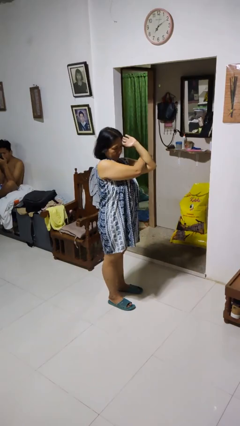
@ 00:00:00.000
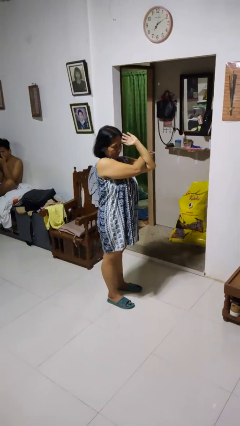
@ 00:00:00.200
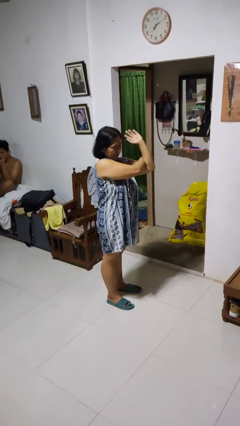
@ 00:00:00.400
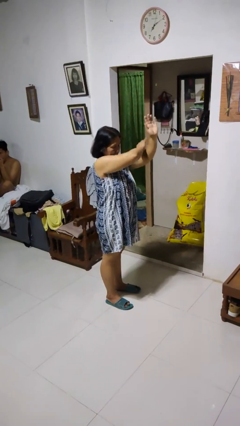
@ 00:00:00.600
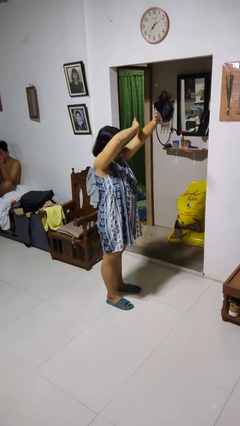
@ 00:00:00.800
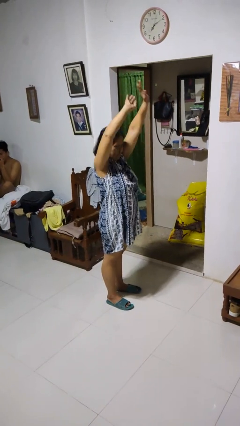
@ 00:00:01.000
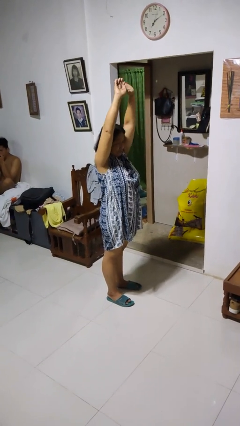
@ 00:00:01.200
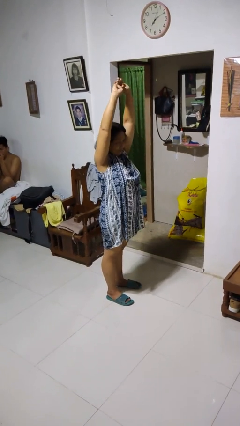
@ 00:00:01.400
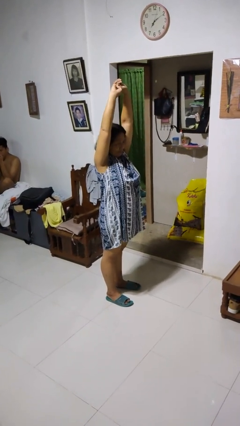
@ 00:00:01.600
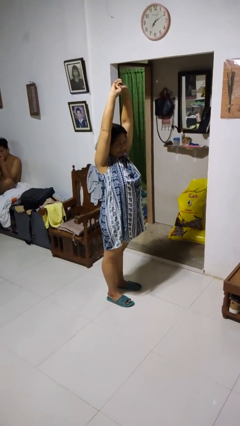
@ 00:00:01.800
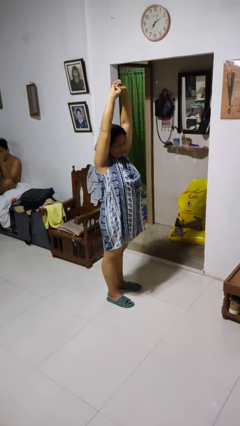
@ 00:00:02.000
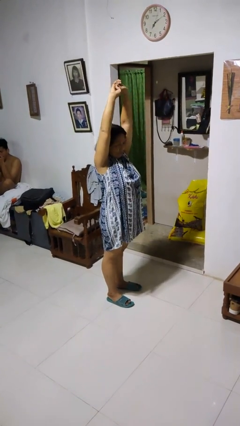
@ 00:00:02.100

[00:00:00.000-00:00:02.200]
person stretches arms over head

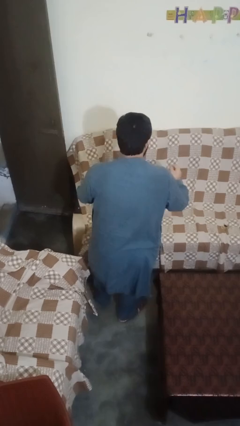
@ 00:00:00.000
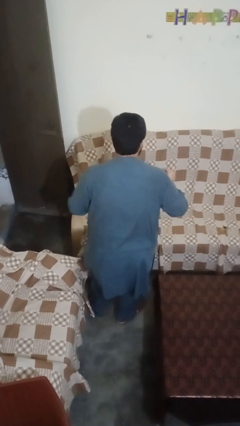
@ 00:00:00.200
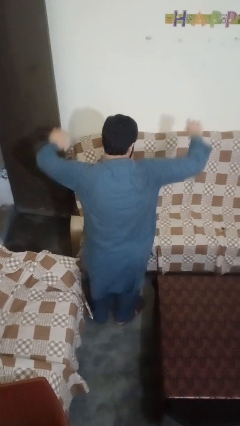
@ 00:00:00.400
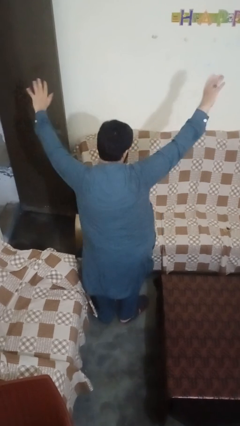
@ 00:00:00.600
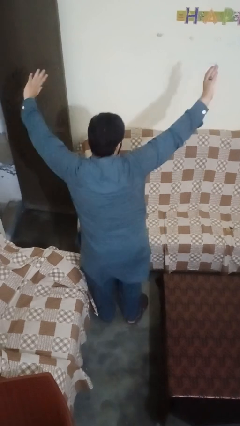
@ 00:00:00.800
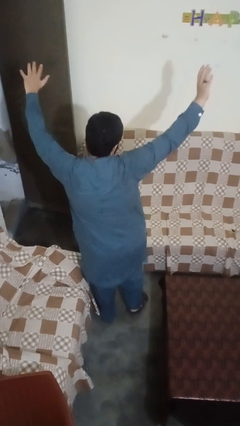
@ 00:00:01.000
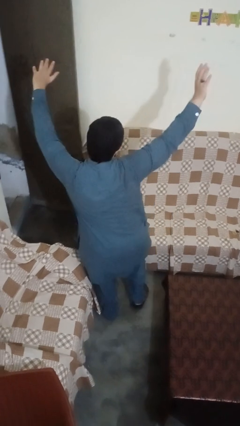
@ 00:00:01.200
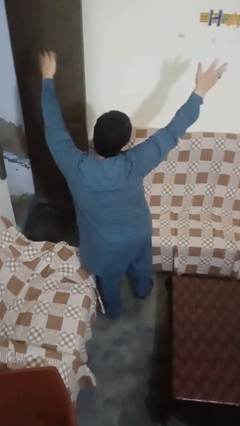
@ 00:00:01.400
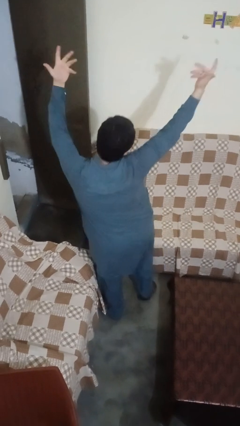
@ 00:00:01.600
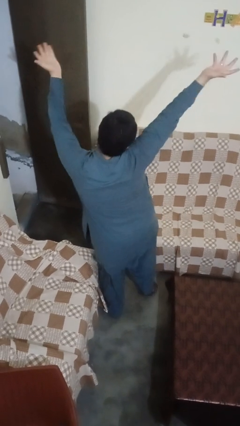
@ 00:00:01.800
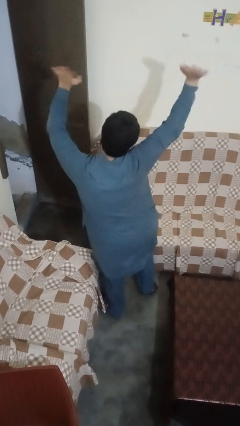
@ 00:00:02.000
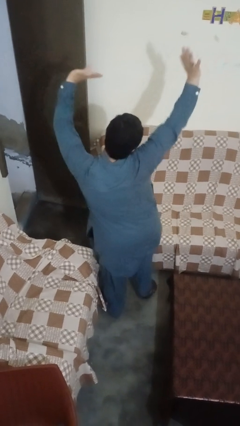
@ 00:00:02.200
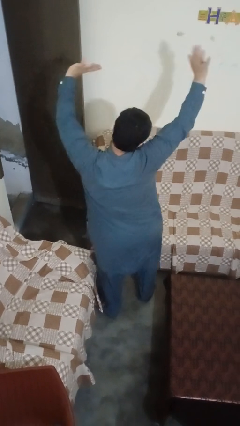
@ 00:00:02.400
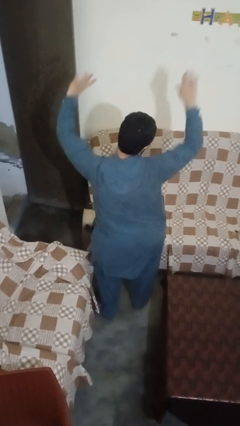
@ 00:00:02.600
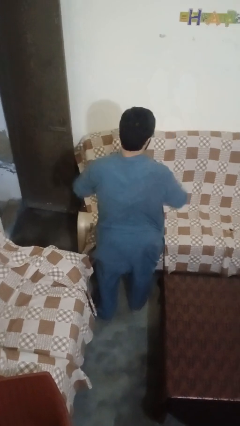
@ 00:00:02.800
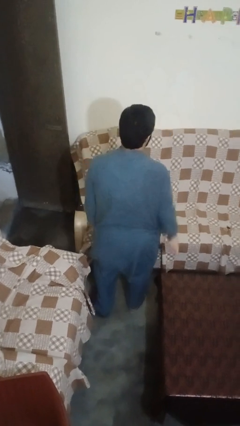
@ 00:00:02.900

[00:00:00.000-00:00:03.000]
person dances in place

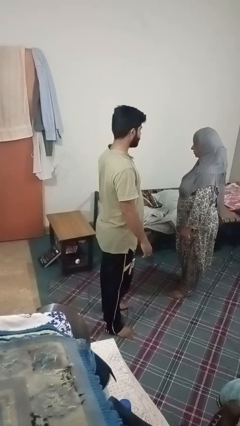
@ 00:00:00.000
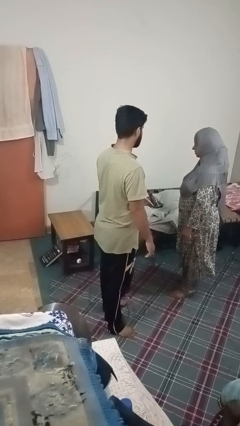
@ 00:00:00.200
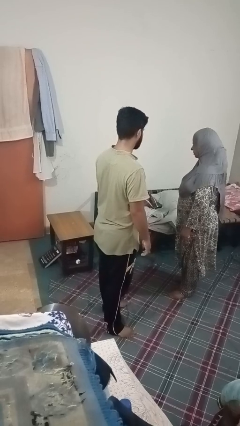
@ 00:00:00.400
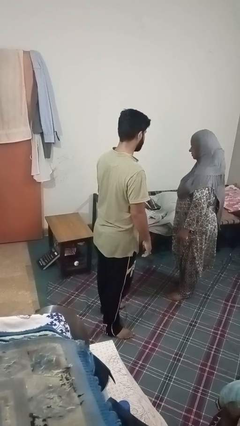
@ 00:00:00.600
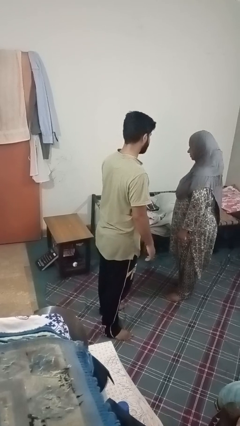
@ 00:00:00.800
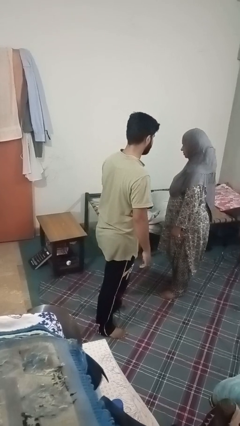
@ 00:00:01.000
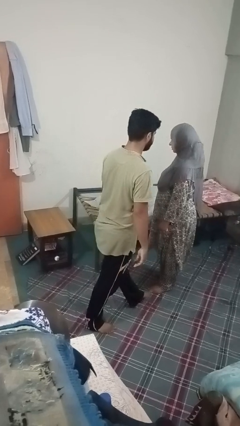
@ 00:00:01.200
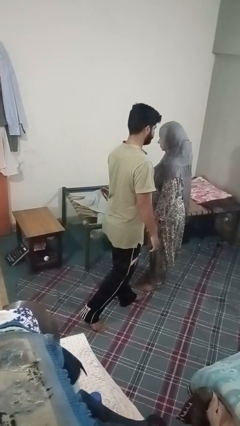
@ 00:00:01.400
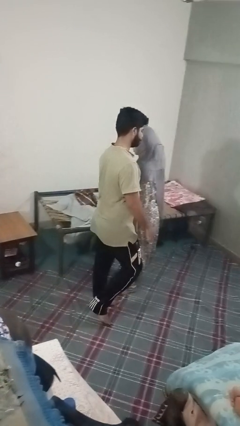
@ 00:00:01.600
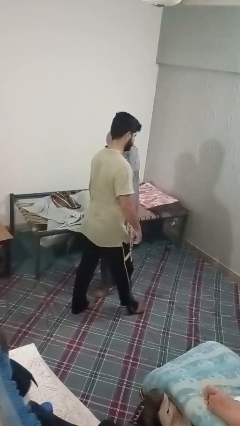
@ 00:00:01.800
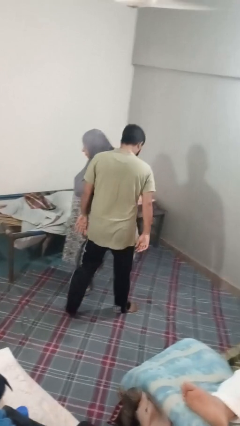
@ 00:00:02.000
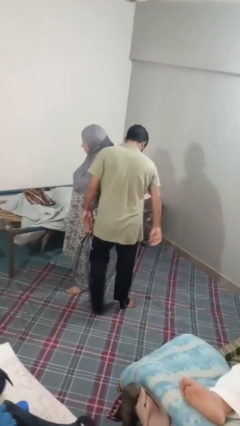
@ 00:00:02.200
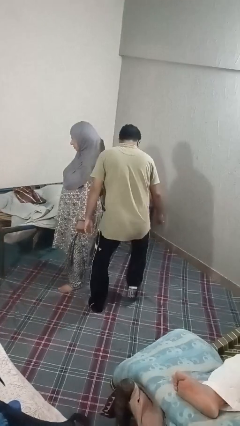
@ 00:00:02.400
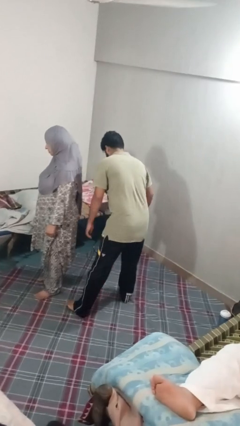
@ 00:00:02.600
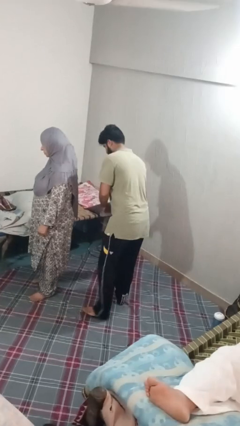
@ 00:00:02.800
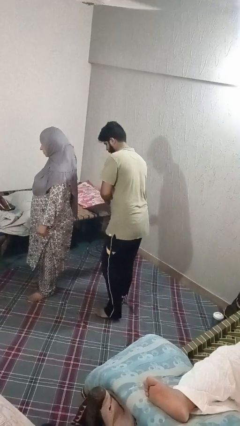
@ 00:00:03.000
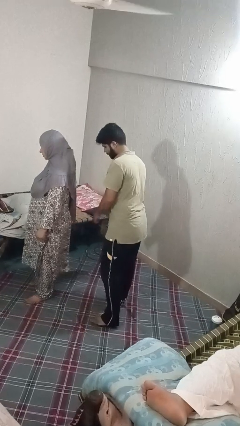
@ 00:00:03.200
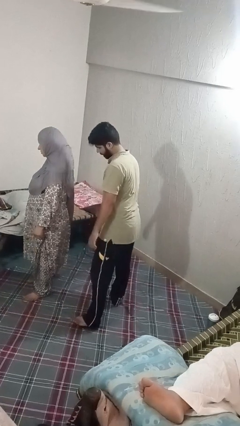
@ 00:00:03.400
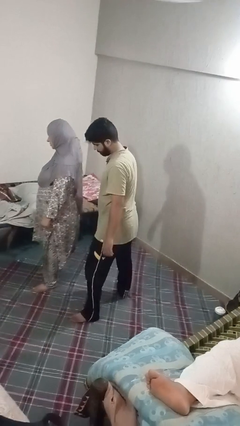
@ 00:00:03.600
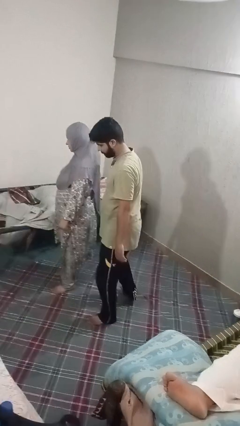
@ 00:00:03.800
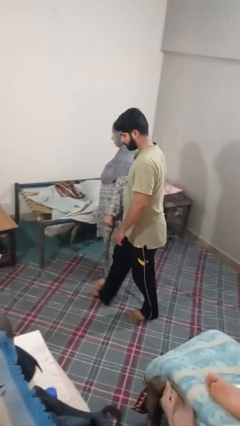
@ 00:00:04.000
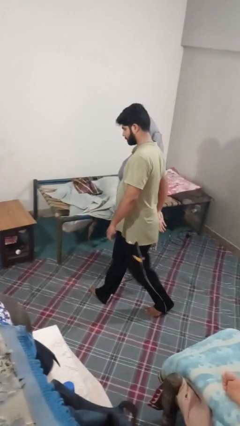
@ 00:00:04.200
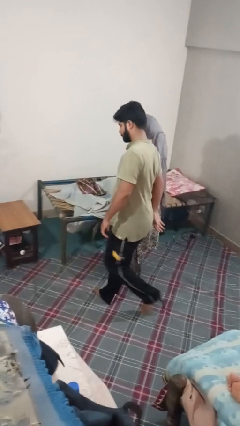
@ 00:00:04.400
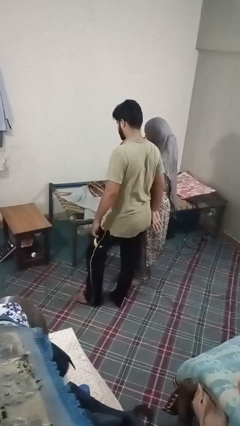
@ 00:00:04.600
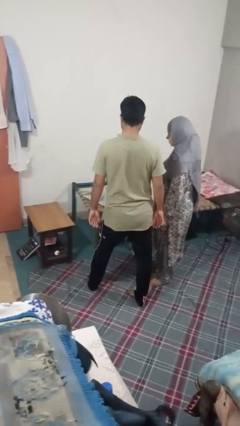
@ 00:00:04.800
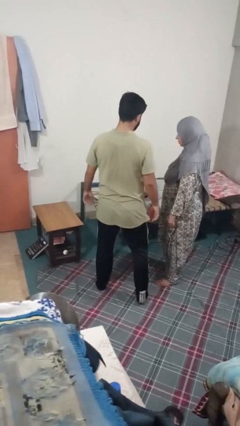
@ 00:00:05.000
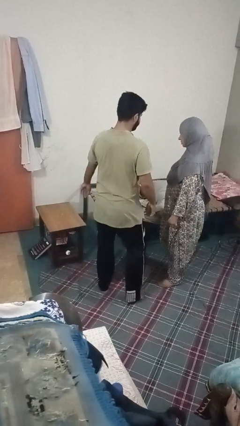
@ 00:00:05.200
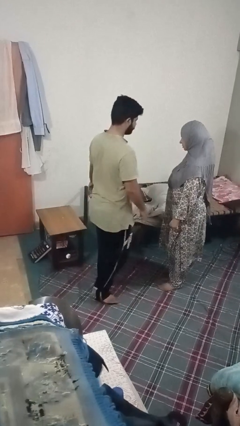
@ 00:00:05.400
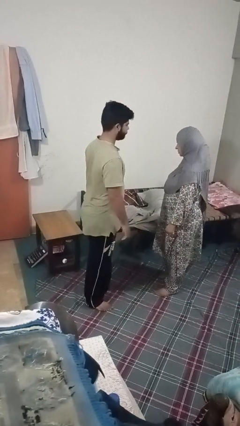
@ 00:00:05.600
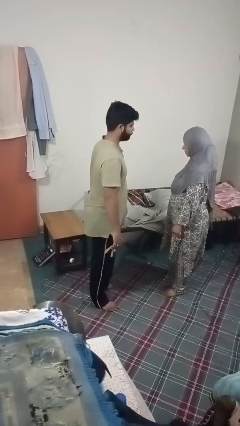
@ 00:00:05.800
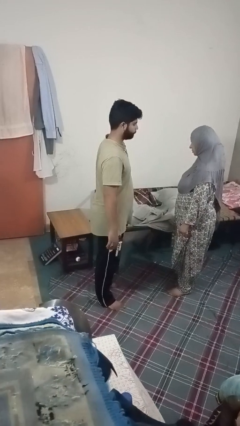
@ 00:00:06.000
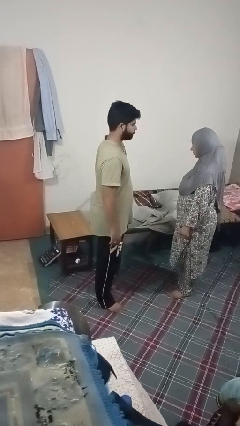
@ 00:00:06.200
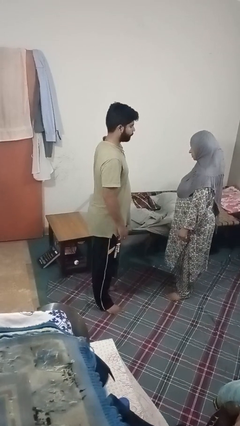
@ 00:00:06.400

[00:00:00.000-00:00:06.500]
person bumps into person

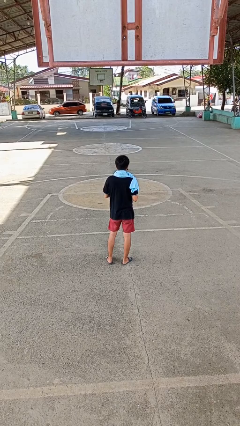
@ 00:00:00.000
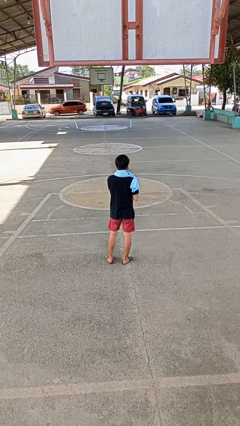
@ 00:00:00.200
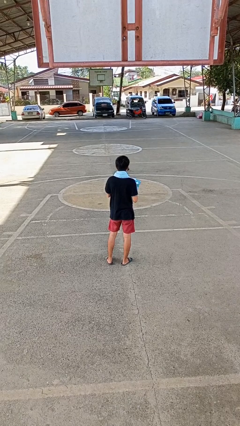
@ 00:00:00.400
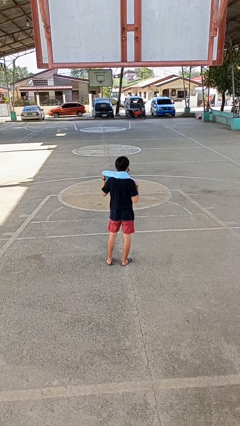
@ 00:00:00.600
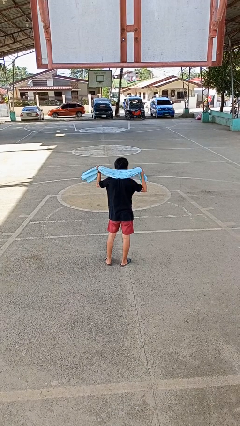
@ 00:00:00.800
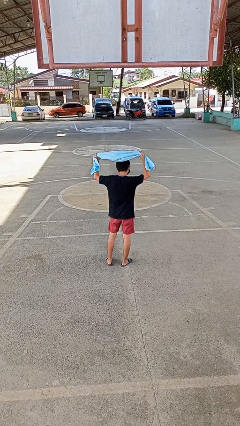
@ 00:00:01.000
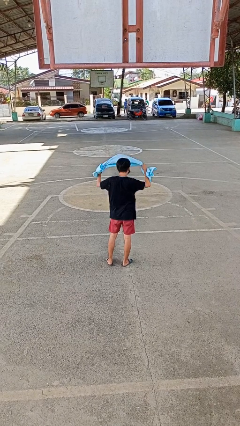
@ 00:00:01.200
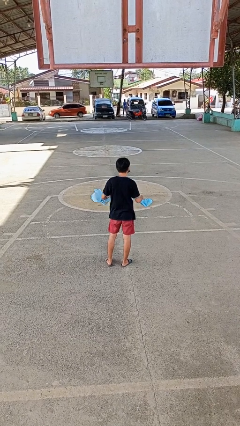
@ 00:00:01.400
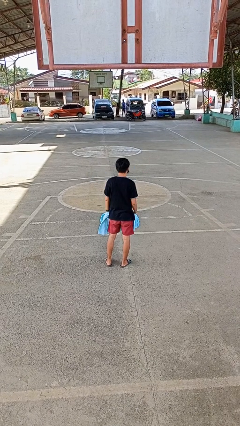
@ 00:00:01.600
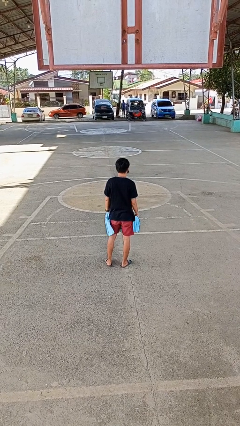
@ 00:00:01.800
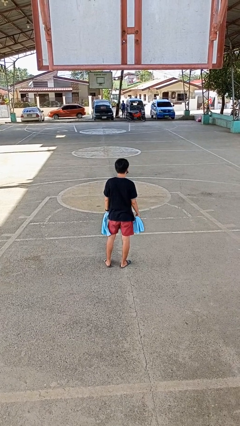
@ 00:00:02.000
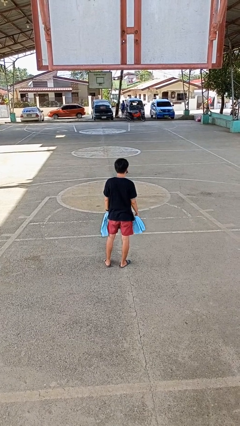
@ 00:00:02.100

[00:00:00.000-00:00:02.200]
person takes off scarf

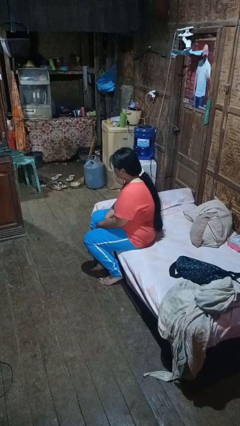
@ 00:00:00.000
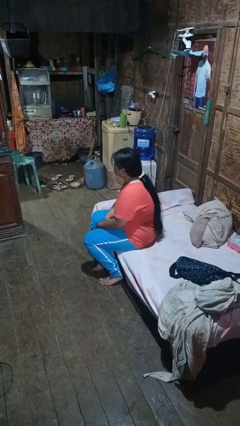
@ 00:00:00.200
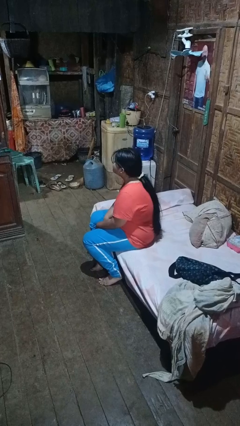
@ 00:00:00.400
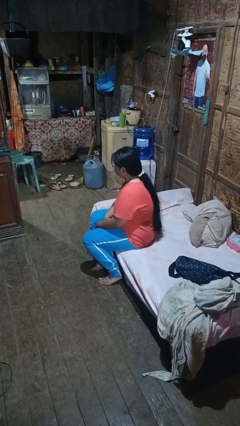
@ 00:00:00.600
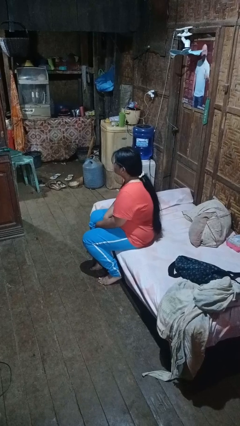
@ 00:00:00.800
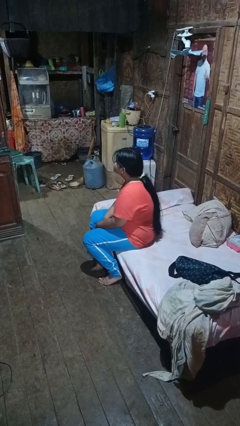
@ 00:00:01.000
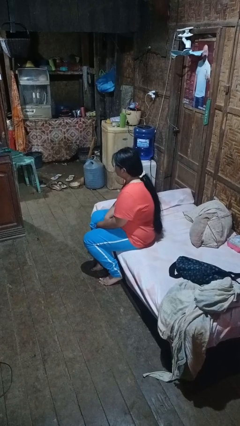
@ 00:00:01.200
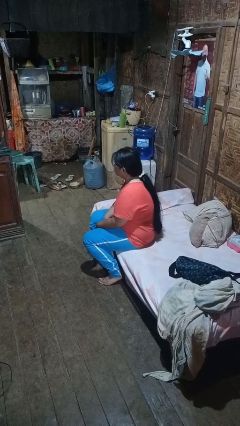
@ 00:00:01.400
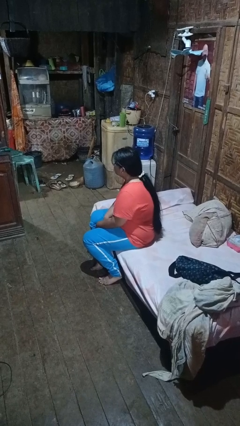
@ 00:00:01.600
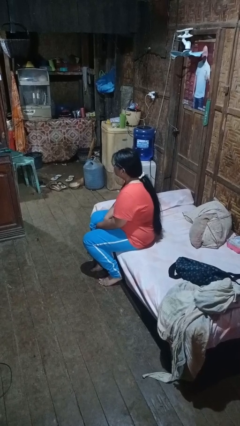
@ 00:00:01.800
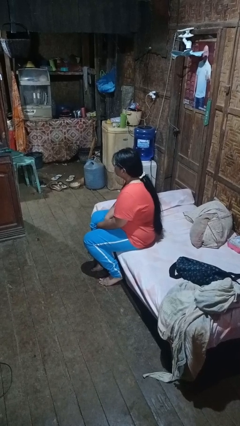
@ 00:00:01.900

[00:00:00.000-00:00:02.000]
person nods head

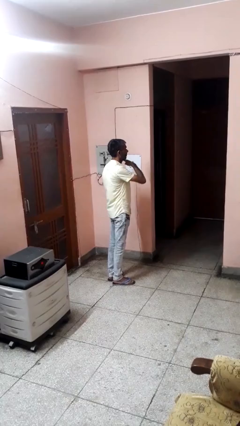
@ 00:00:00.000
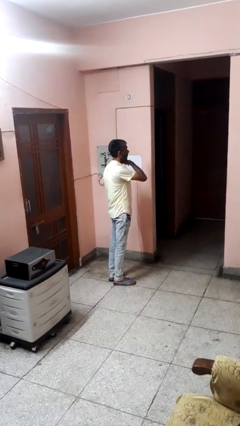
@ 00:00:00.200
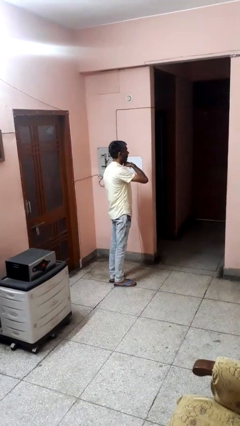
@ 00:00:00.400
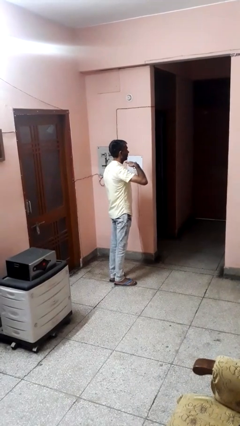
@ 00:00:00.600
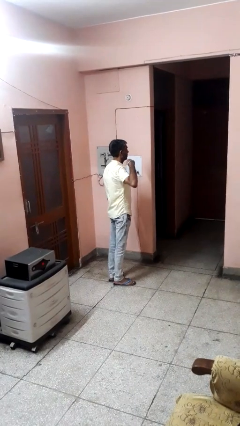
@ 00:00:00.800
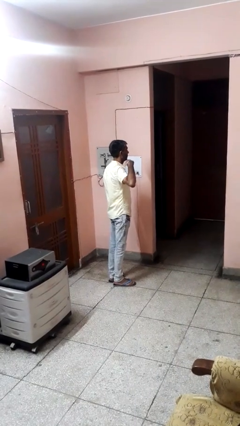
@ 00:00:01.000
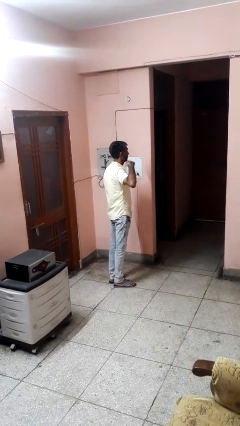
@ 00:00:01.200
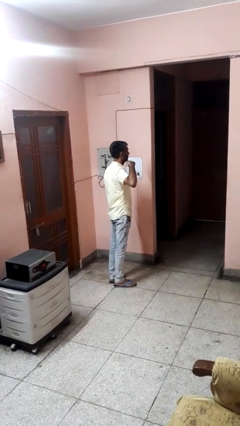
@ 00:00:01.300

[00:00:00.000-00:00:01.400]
person gestures cut
